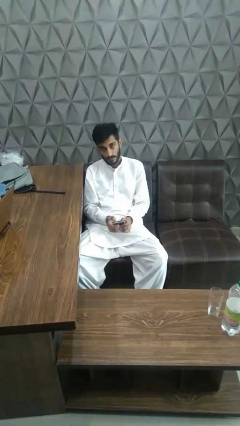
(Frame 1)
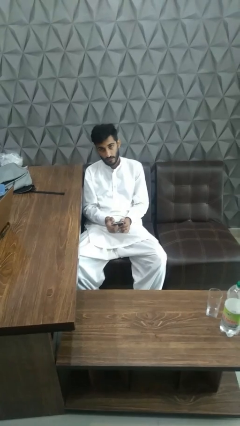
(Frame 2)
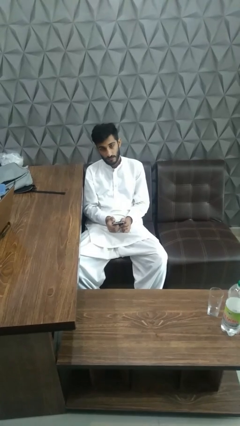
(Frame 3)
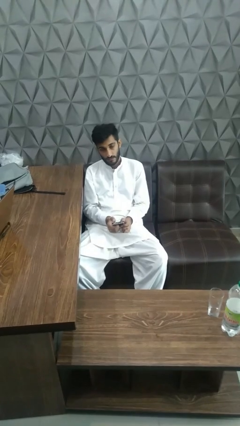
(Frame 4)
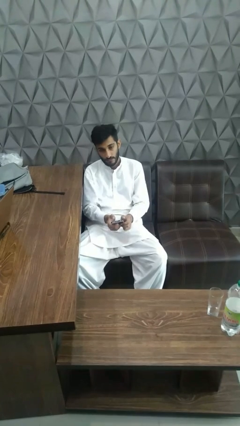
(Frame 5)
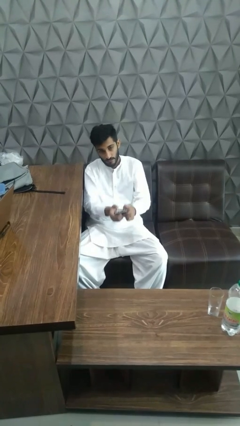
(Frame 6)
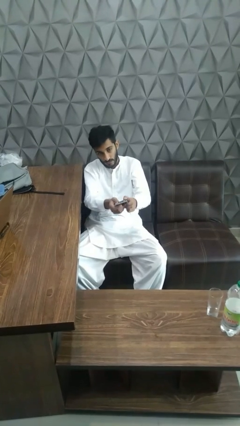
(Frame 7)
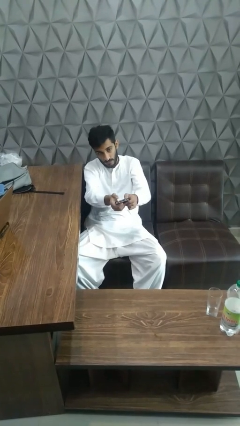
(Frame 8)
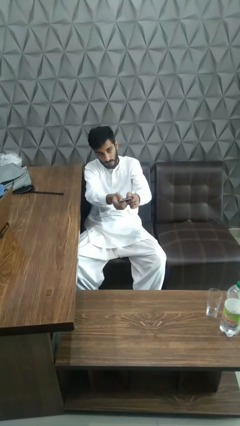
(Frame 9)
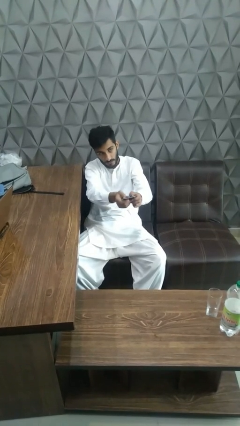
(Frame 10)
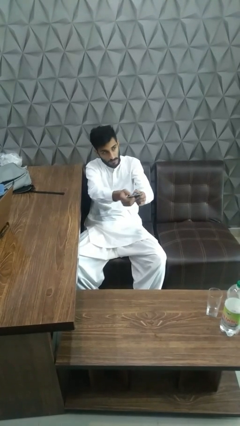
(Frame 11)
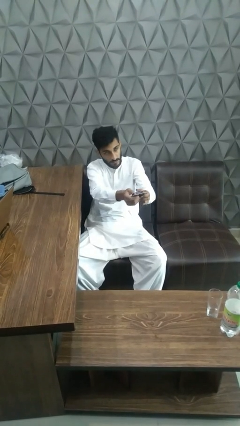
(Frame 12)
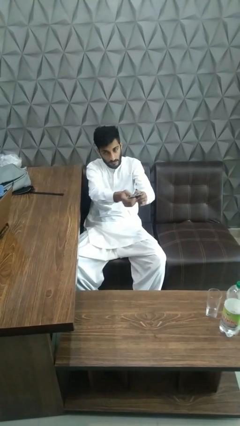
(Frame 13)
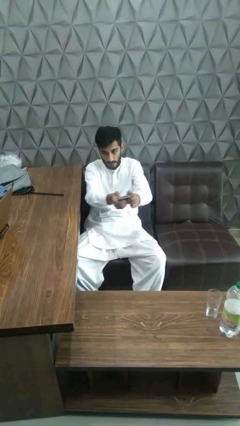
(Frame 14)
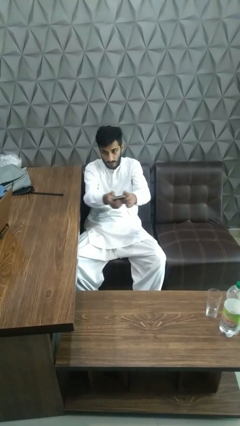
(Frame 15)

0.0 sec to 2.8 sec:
person uses television remote

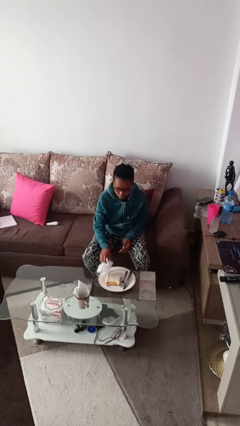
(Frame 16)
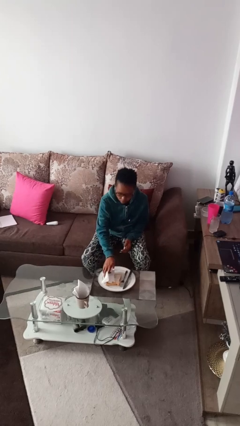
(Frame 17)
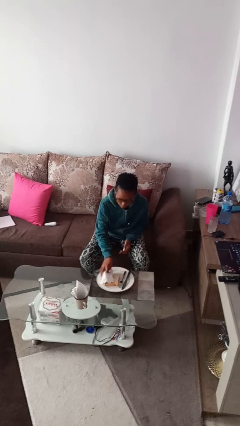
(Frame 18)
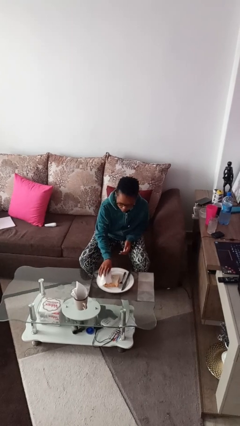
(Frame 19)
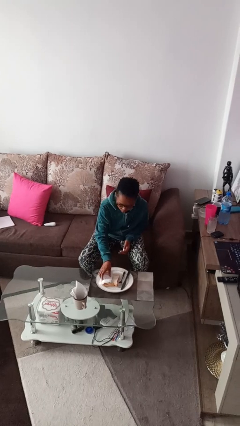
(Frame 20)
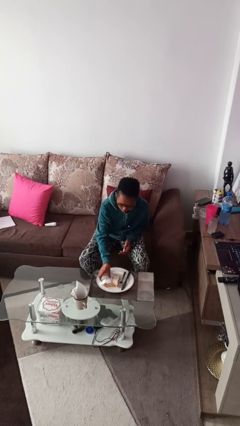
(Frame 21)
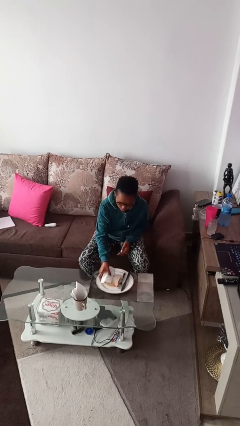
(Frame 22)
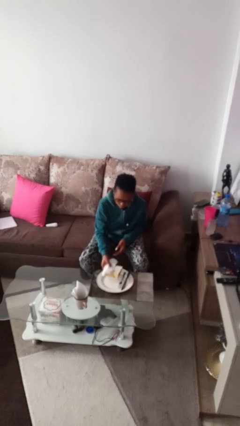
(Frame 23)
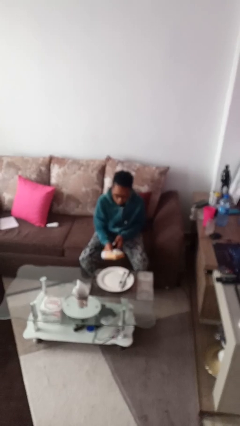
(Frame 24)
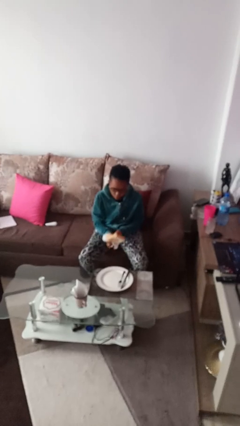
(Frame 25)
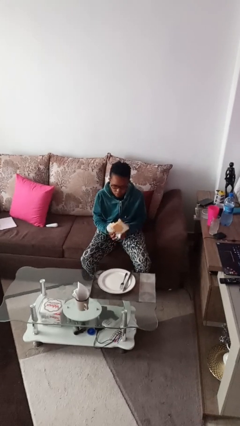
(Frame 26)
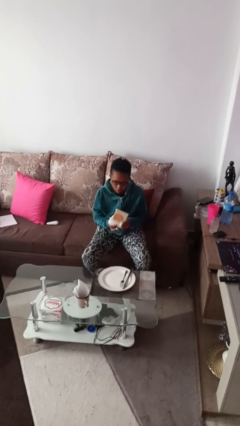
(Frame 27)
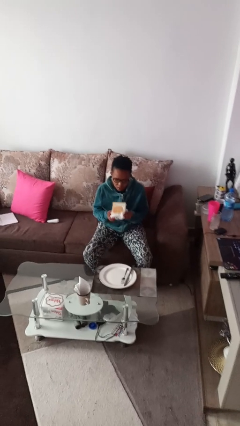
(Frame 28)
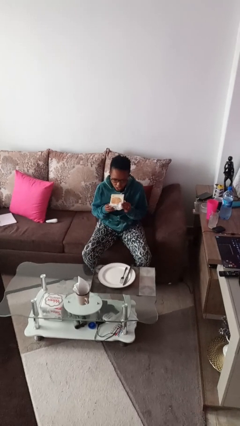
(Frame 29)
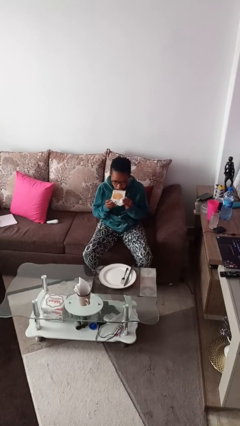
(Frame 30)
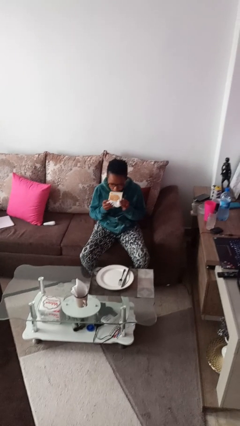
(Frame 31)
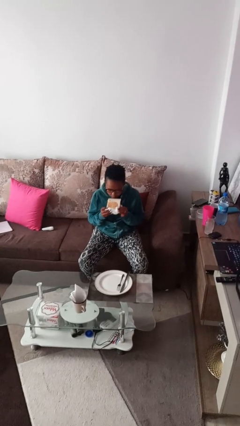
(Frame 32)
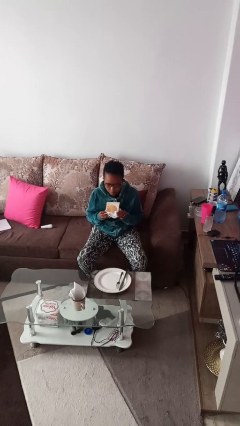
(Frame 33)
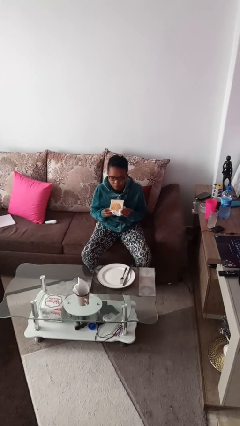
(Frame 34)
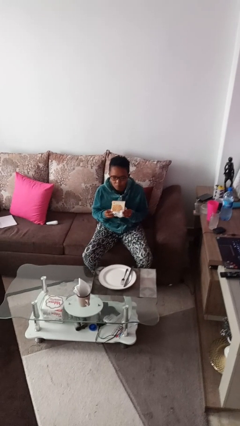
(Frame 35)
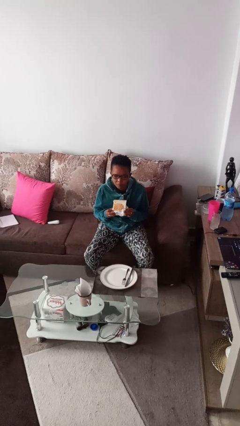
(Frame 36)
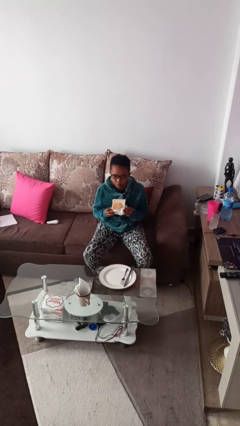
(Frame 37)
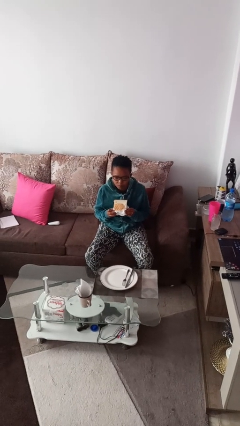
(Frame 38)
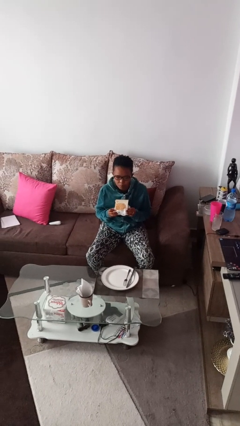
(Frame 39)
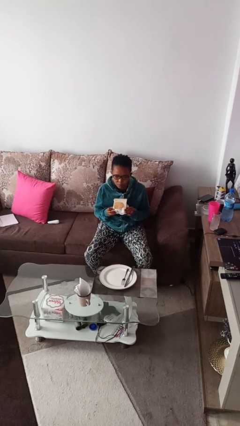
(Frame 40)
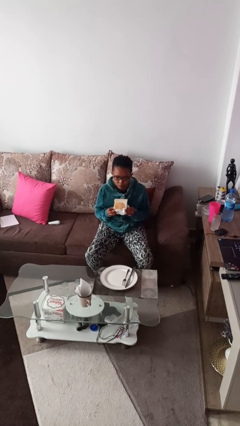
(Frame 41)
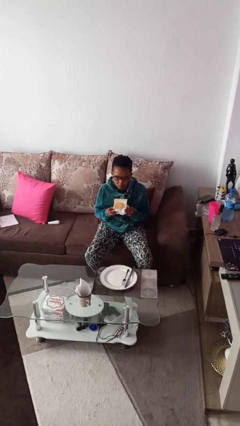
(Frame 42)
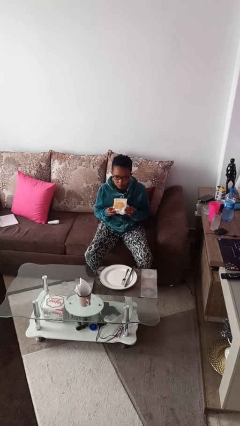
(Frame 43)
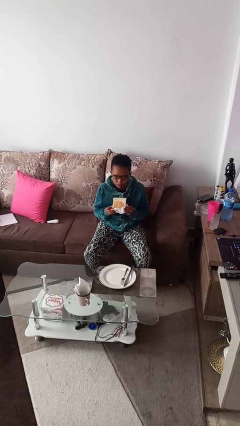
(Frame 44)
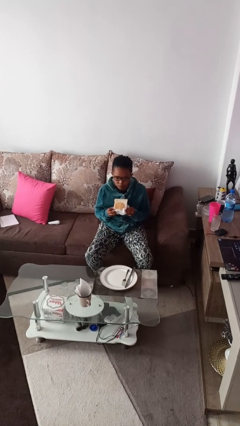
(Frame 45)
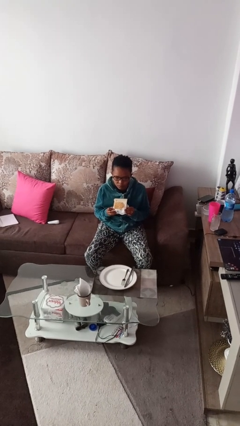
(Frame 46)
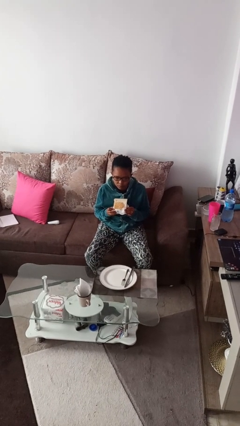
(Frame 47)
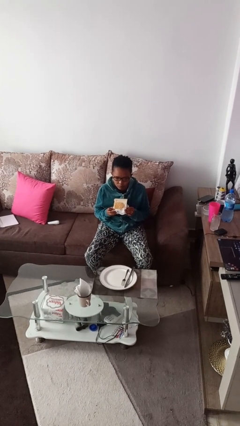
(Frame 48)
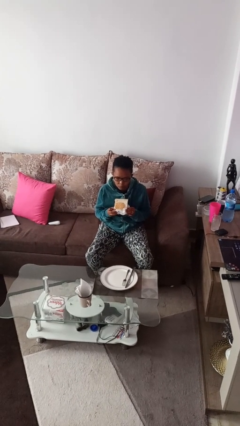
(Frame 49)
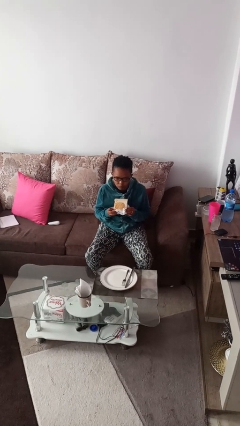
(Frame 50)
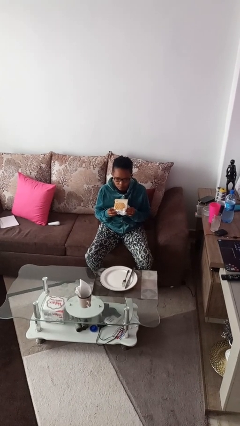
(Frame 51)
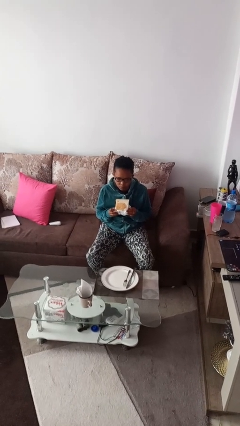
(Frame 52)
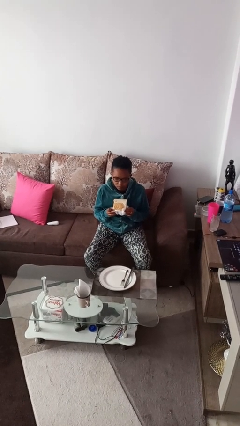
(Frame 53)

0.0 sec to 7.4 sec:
person eats with hands

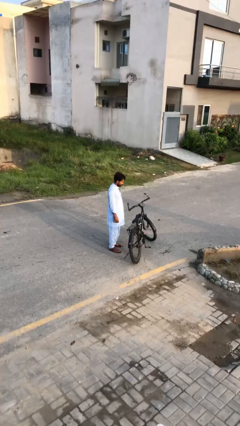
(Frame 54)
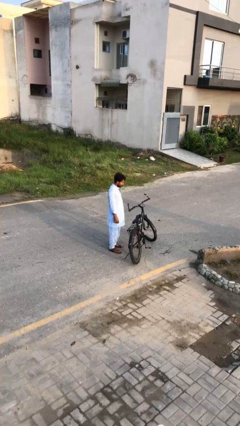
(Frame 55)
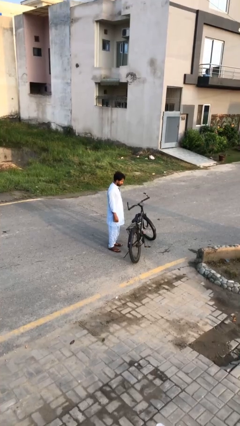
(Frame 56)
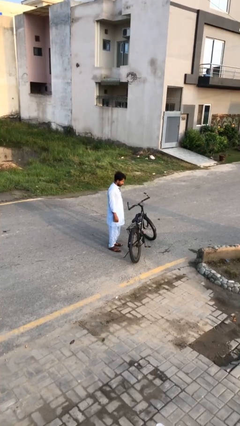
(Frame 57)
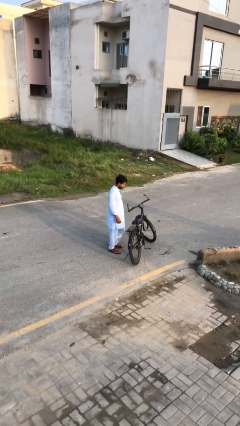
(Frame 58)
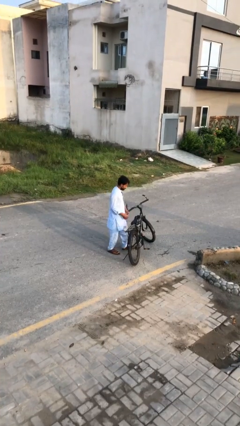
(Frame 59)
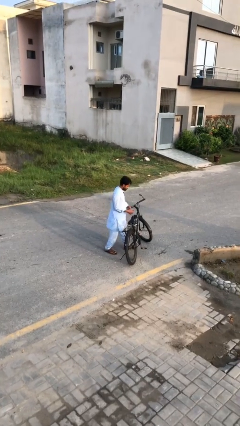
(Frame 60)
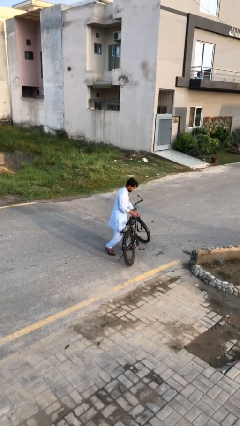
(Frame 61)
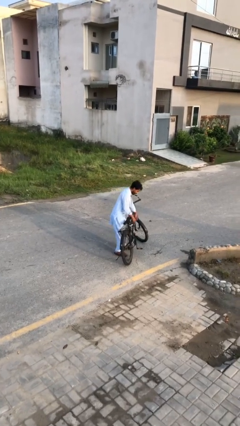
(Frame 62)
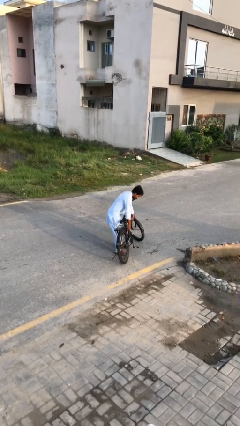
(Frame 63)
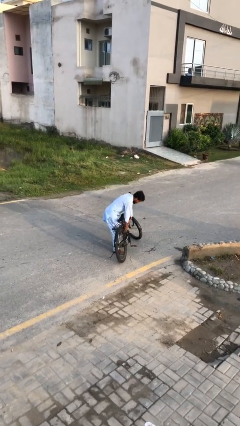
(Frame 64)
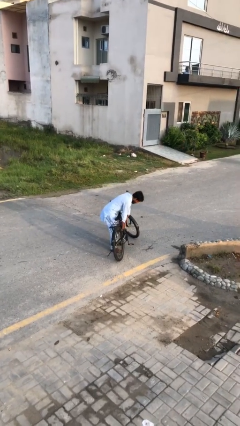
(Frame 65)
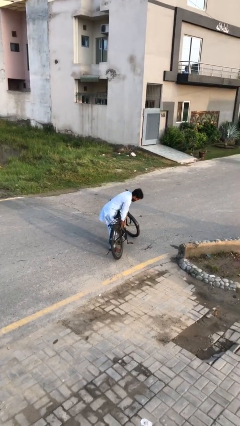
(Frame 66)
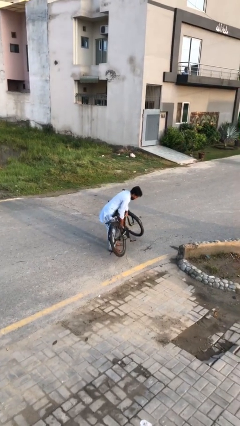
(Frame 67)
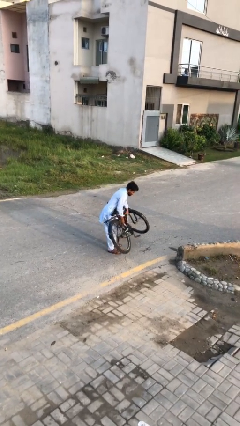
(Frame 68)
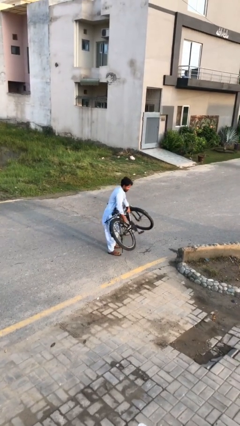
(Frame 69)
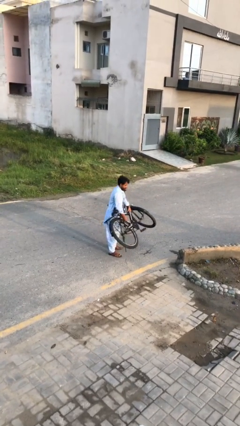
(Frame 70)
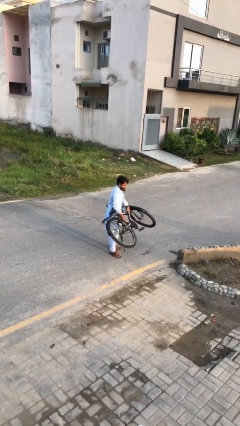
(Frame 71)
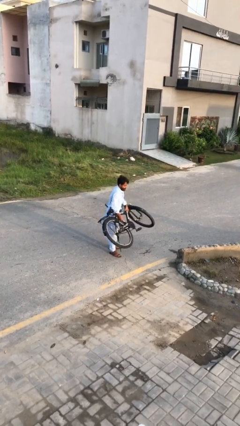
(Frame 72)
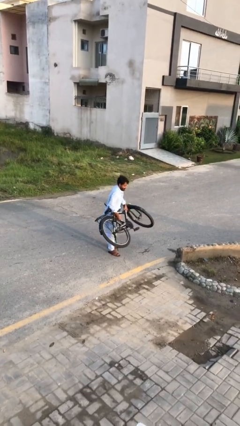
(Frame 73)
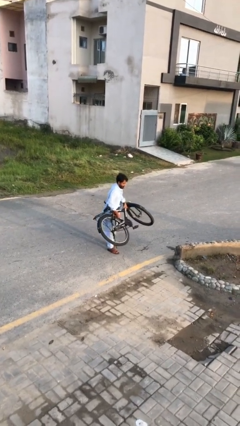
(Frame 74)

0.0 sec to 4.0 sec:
person picks up object from floor

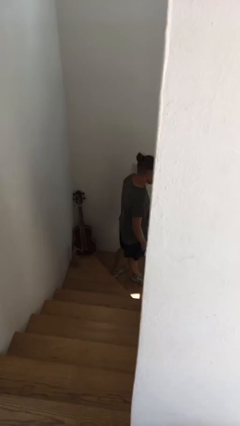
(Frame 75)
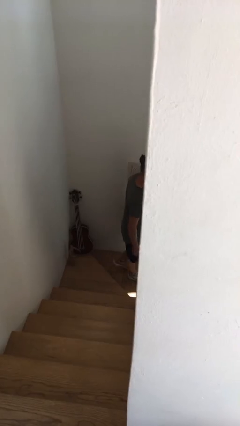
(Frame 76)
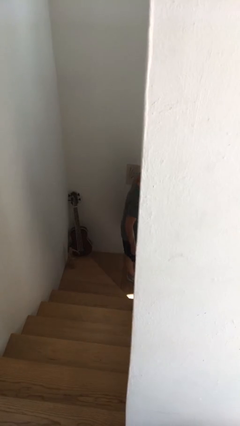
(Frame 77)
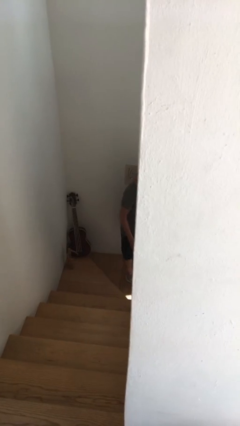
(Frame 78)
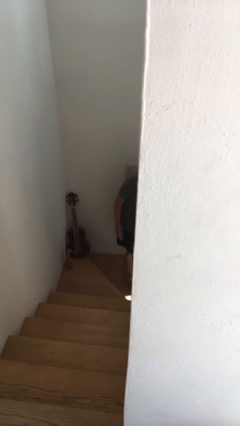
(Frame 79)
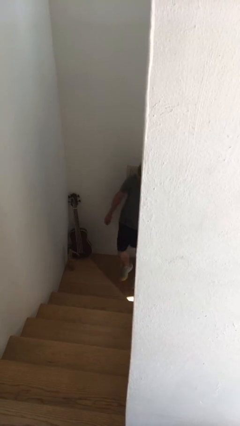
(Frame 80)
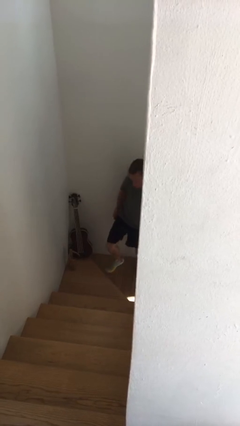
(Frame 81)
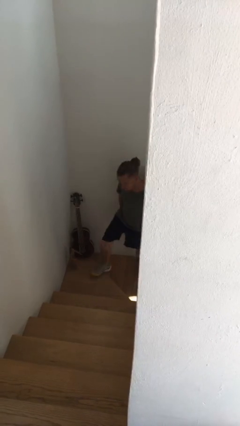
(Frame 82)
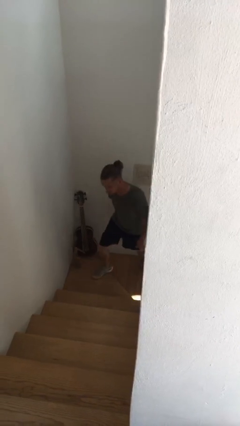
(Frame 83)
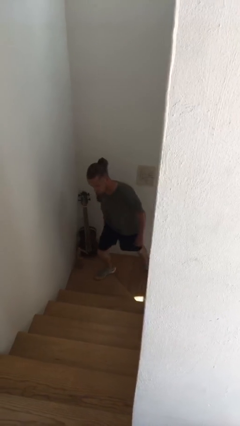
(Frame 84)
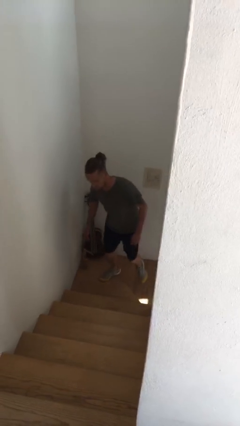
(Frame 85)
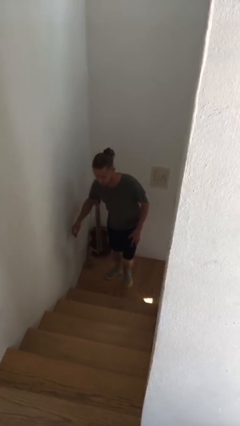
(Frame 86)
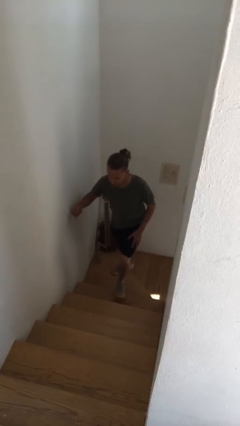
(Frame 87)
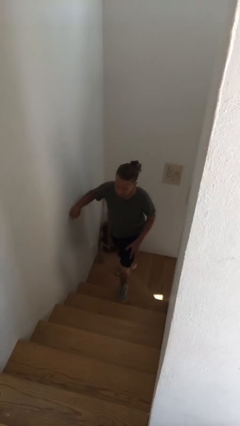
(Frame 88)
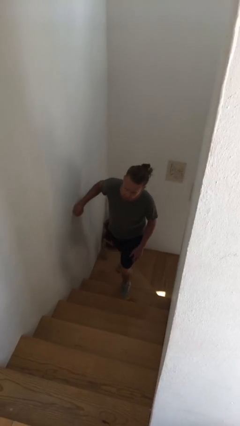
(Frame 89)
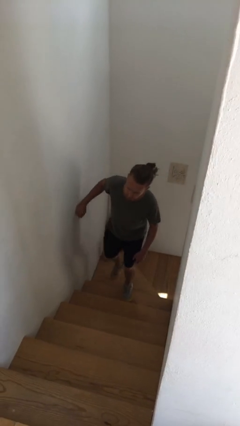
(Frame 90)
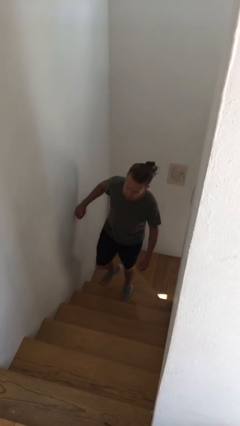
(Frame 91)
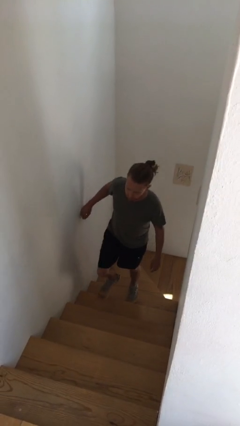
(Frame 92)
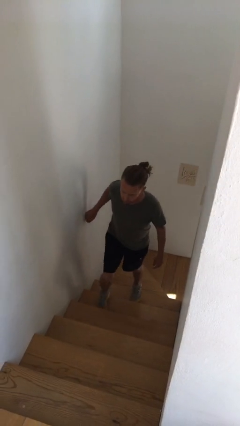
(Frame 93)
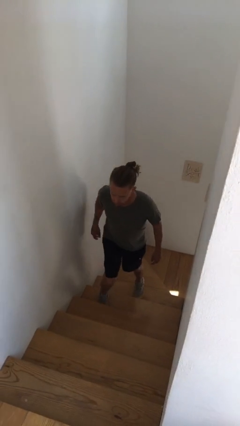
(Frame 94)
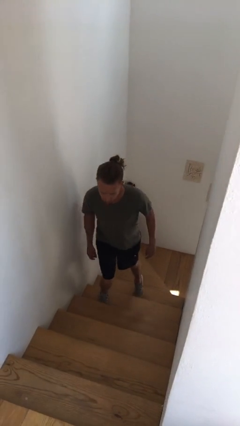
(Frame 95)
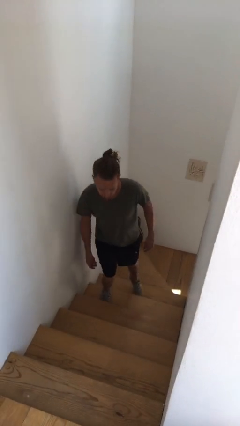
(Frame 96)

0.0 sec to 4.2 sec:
person climbs up stairs
